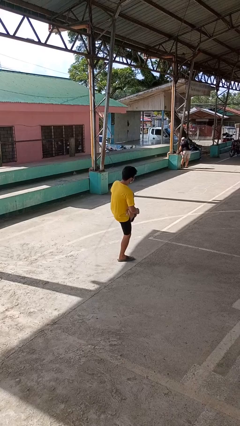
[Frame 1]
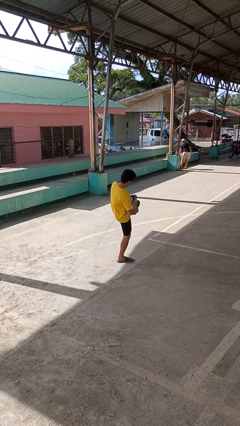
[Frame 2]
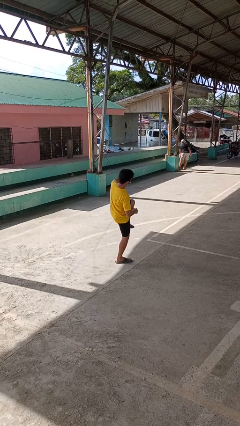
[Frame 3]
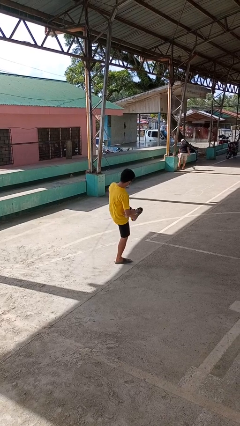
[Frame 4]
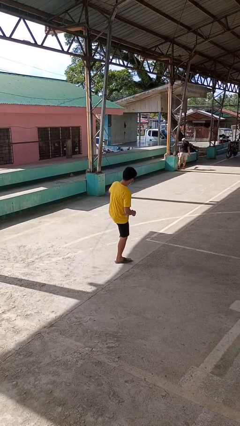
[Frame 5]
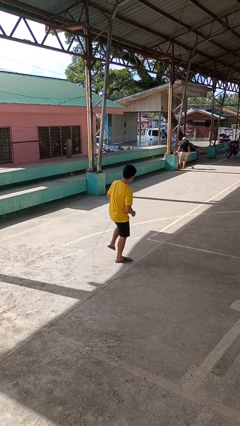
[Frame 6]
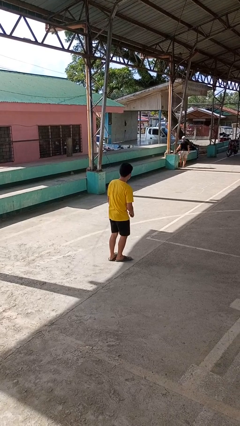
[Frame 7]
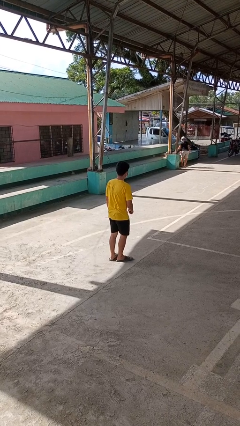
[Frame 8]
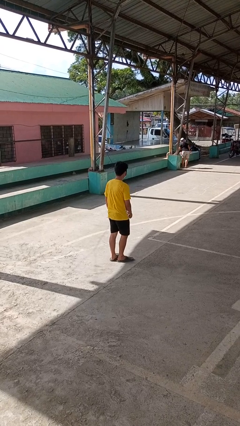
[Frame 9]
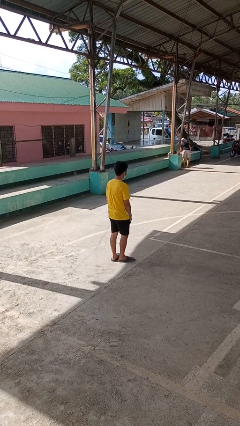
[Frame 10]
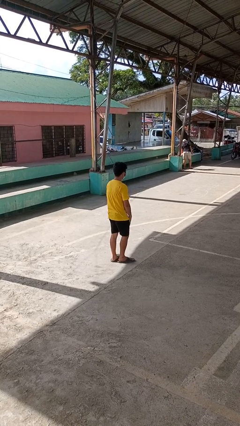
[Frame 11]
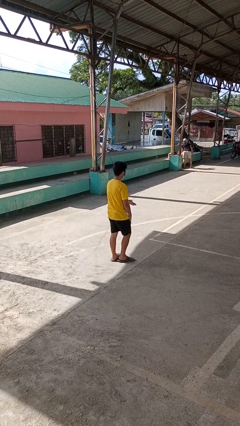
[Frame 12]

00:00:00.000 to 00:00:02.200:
person karate kicks

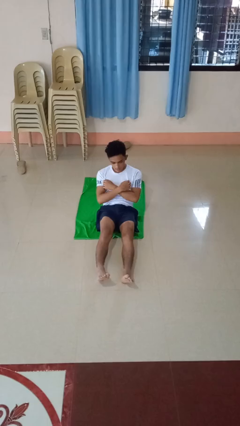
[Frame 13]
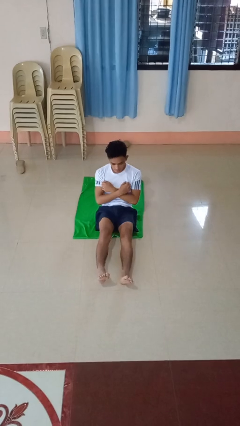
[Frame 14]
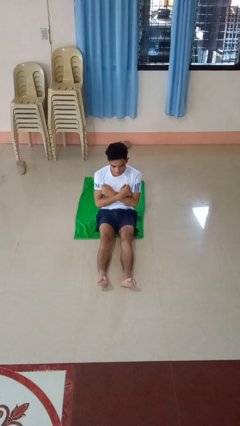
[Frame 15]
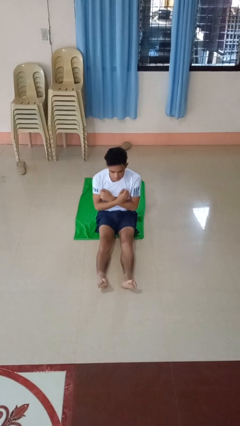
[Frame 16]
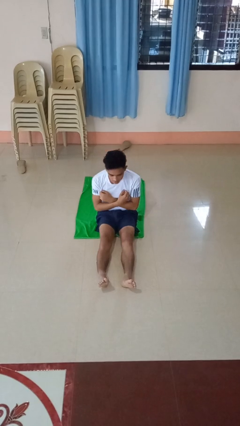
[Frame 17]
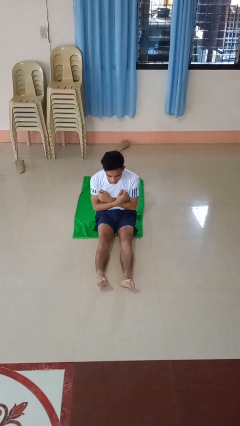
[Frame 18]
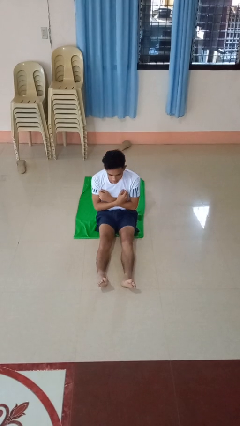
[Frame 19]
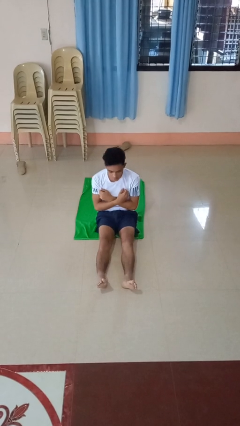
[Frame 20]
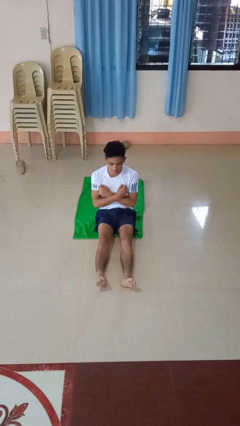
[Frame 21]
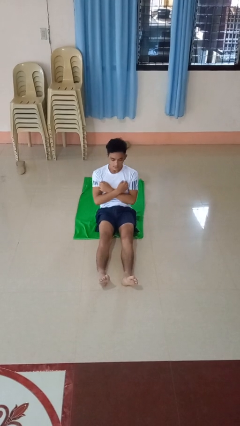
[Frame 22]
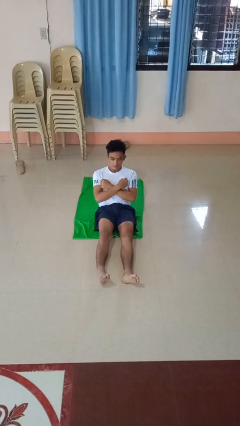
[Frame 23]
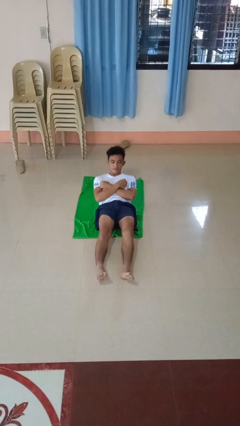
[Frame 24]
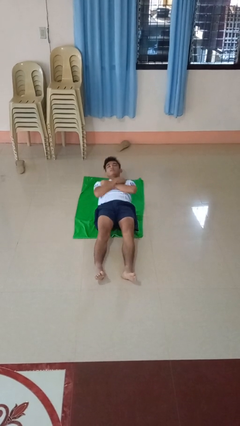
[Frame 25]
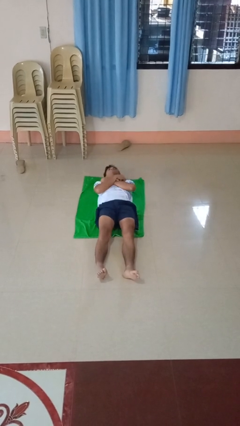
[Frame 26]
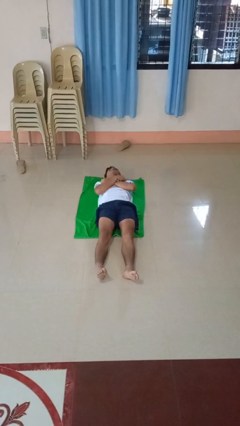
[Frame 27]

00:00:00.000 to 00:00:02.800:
person exercises with situp

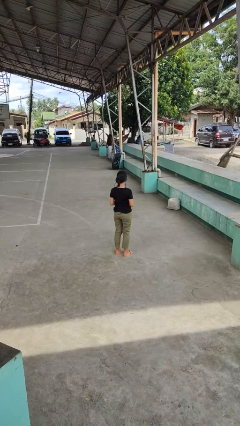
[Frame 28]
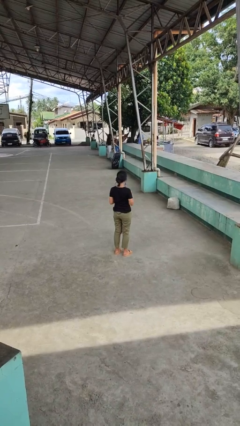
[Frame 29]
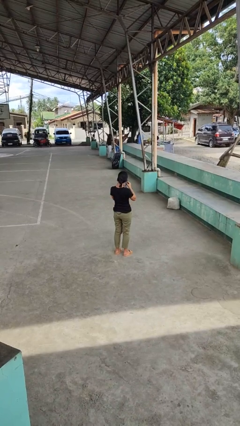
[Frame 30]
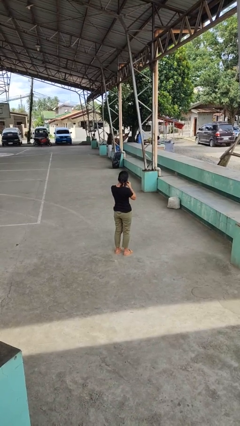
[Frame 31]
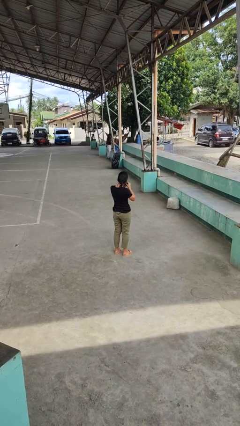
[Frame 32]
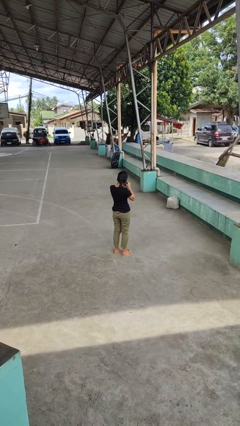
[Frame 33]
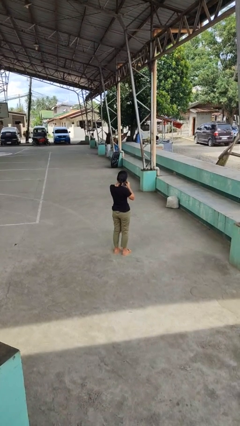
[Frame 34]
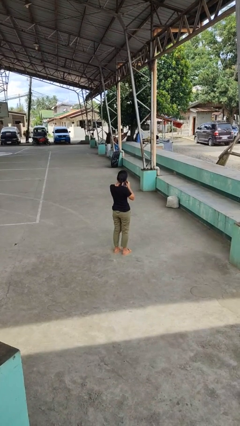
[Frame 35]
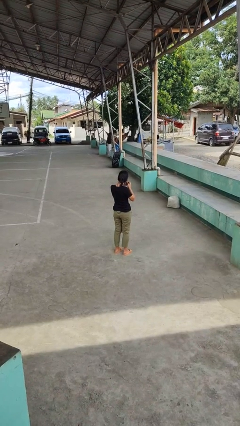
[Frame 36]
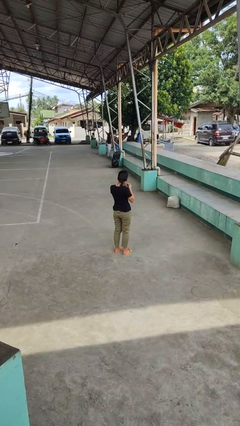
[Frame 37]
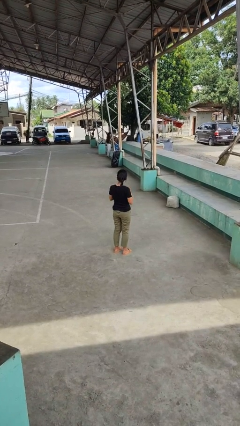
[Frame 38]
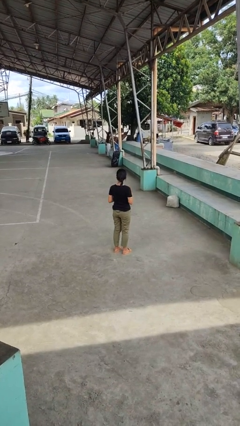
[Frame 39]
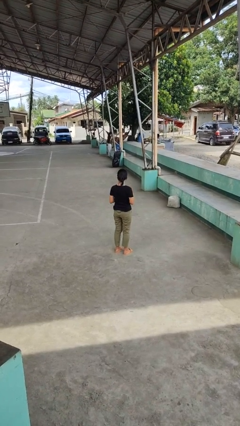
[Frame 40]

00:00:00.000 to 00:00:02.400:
person takes off earrings

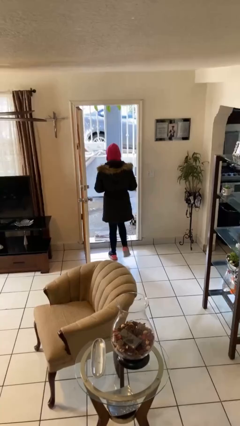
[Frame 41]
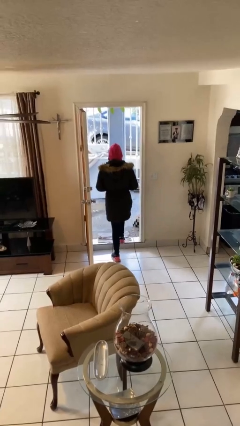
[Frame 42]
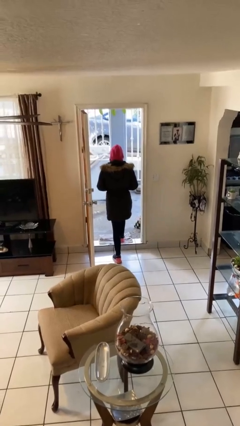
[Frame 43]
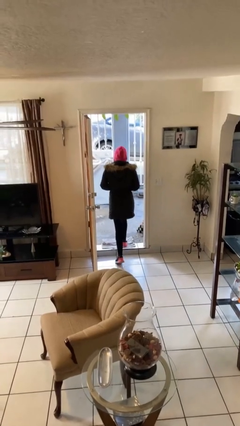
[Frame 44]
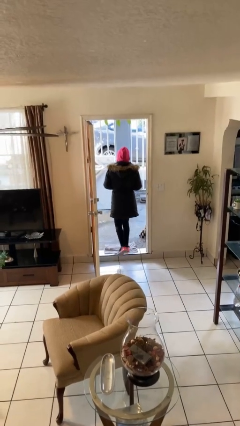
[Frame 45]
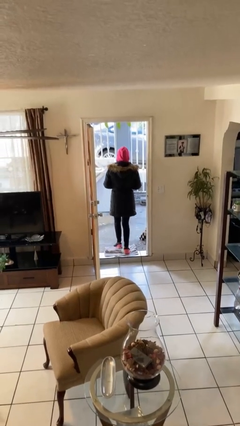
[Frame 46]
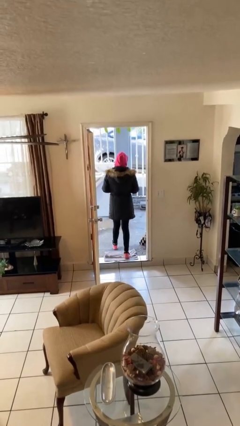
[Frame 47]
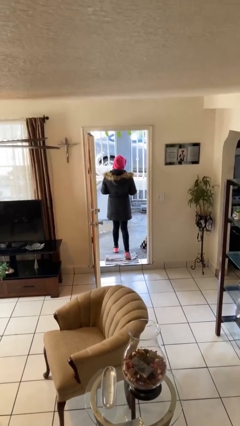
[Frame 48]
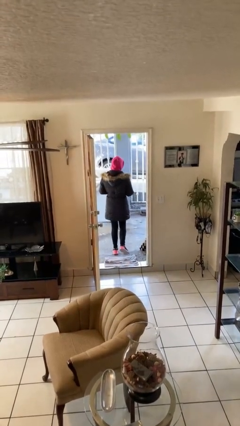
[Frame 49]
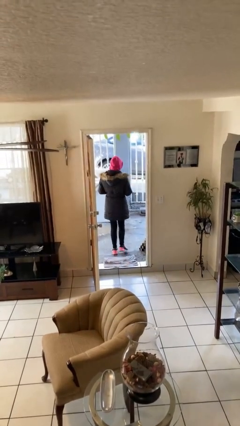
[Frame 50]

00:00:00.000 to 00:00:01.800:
person exits scene through structure

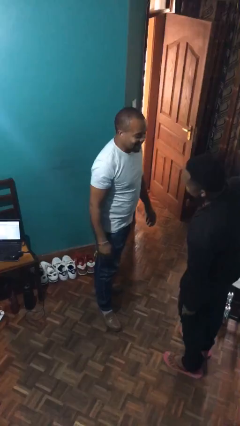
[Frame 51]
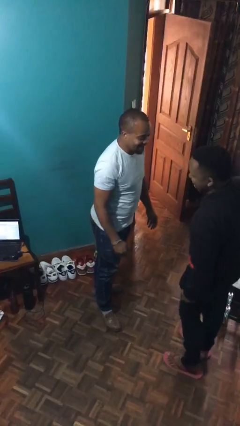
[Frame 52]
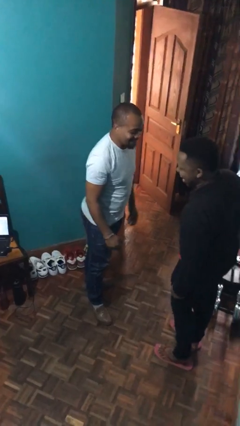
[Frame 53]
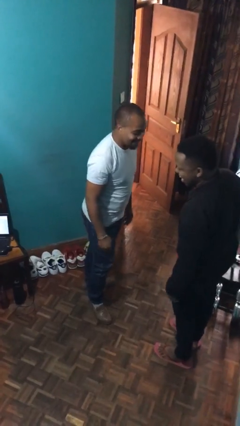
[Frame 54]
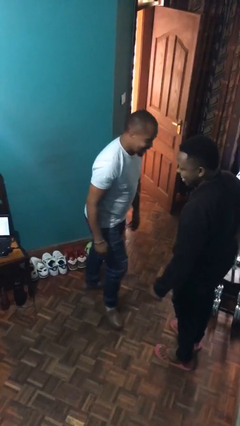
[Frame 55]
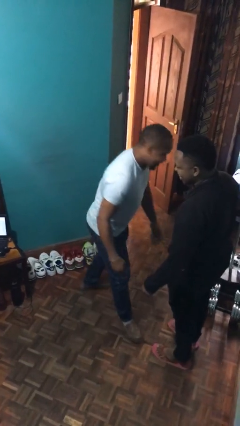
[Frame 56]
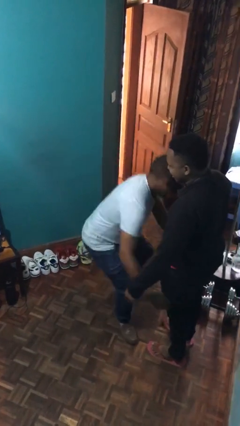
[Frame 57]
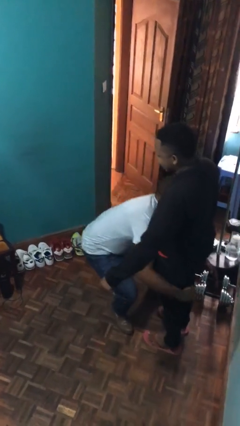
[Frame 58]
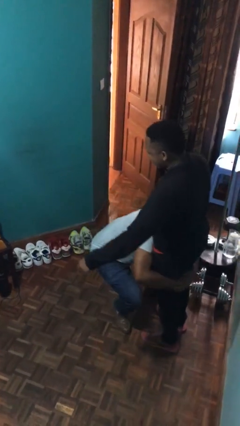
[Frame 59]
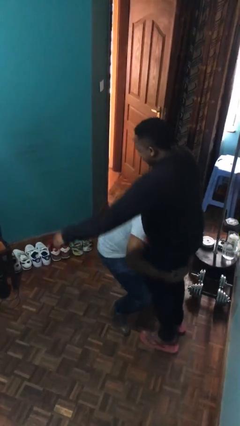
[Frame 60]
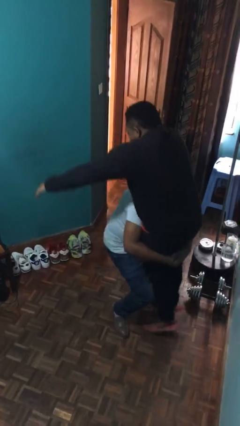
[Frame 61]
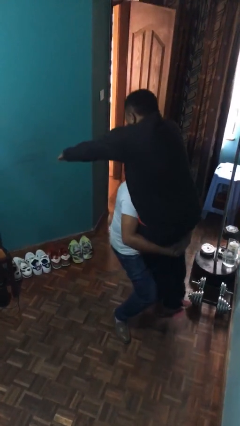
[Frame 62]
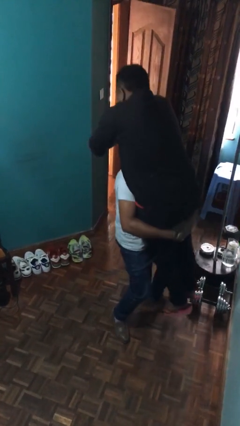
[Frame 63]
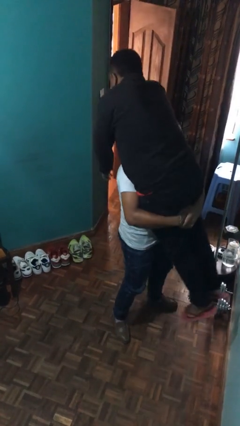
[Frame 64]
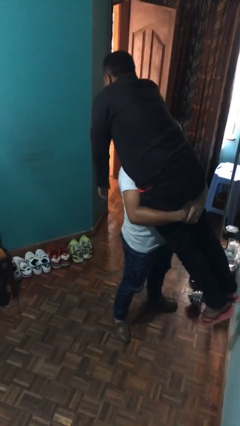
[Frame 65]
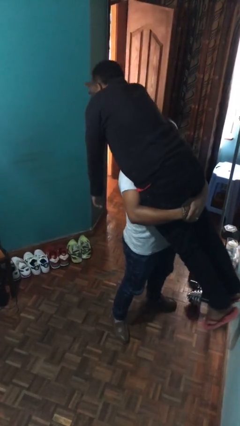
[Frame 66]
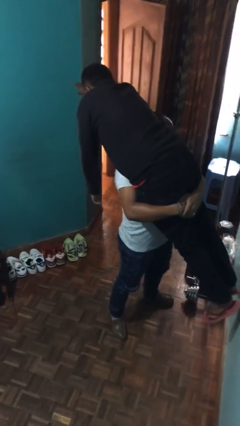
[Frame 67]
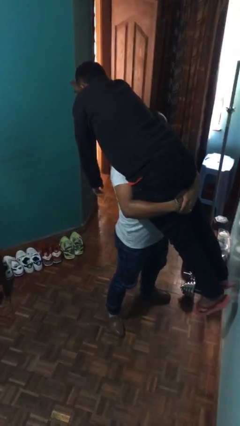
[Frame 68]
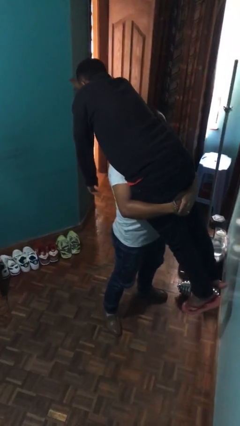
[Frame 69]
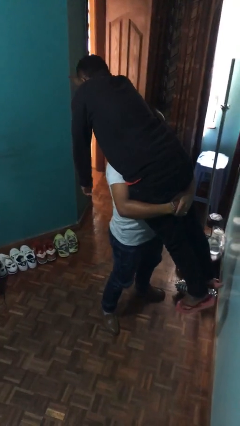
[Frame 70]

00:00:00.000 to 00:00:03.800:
person carries person over shoulder

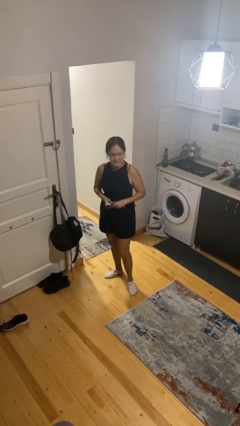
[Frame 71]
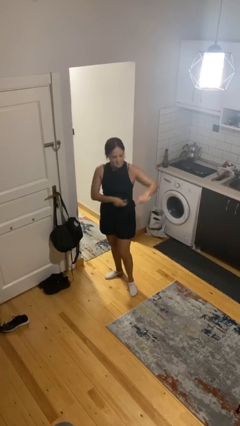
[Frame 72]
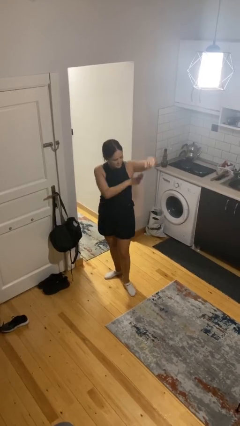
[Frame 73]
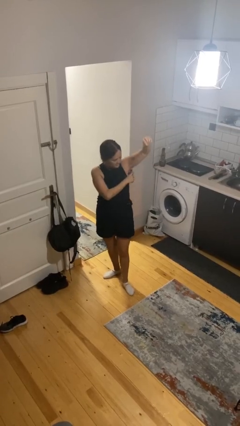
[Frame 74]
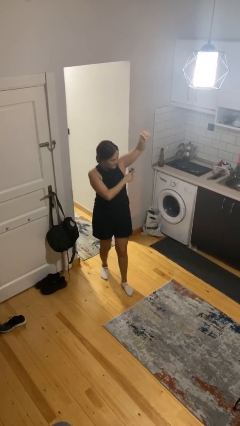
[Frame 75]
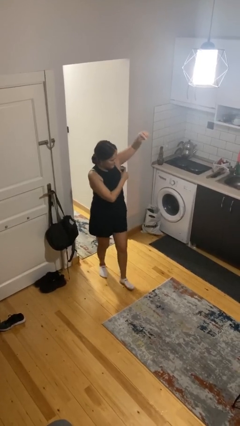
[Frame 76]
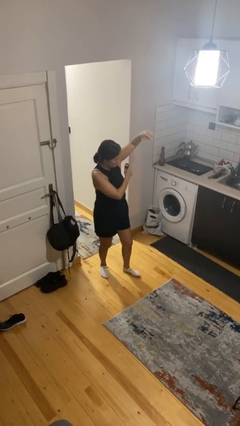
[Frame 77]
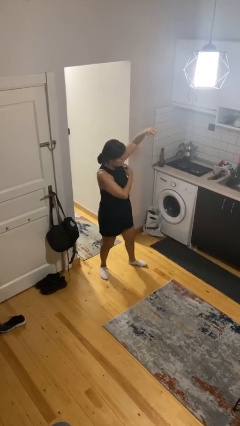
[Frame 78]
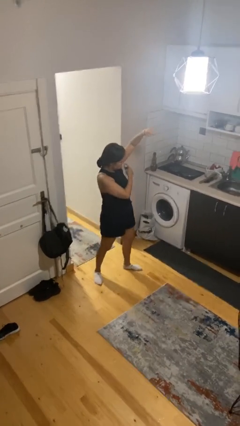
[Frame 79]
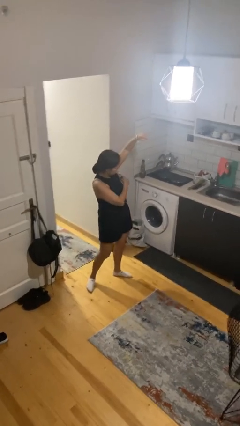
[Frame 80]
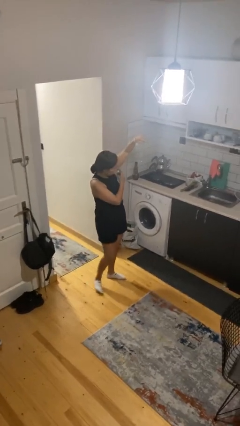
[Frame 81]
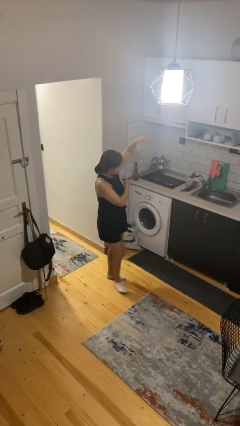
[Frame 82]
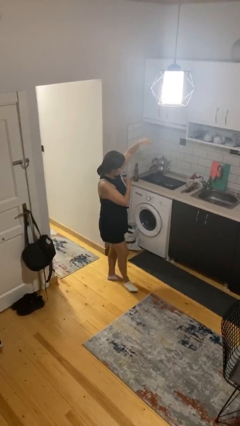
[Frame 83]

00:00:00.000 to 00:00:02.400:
person applies deodorant

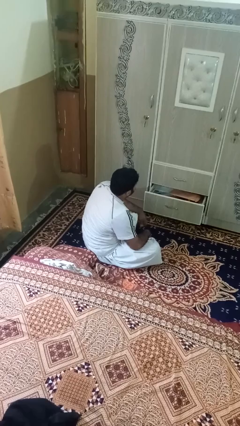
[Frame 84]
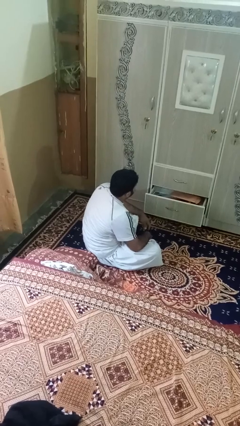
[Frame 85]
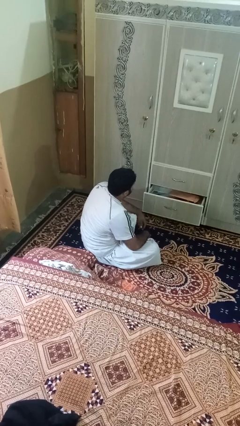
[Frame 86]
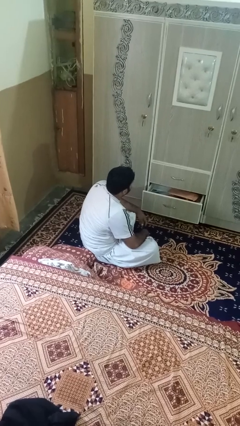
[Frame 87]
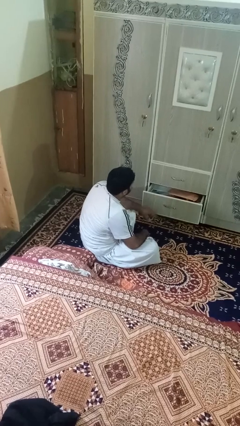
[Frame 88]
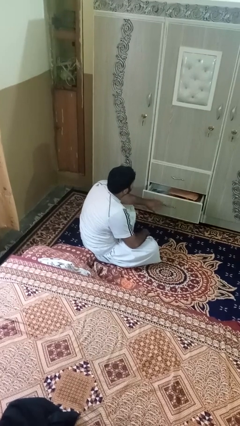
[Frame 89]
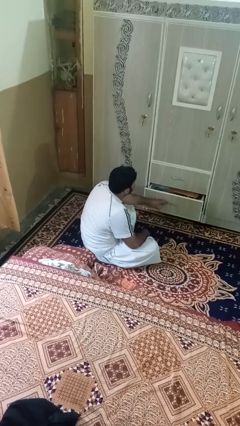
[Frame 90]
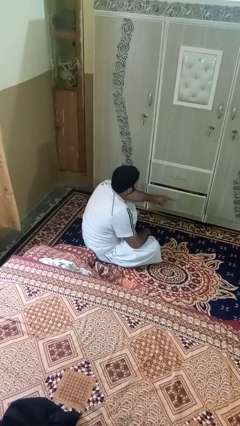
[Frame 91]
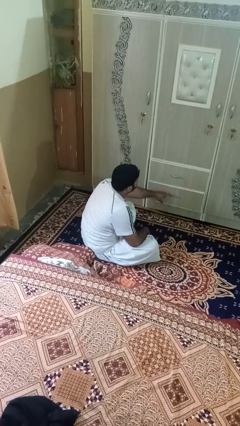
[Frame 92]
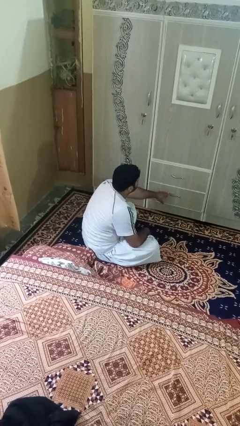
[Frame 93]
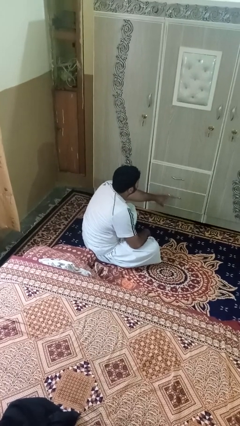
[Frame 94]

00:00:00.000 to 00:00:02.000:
person closes dresser drawer
